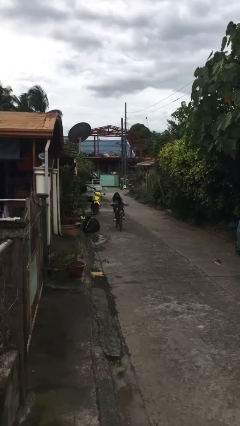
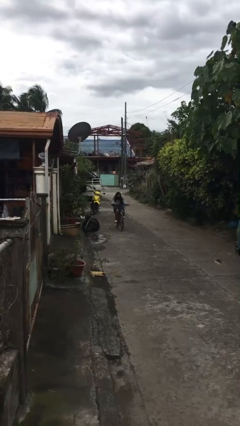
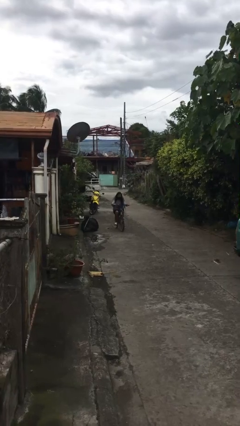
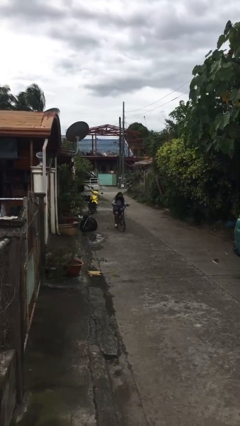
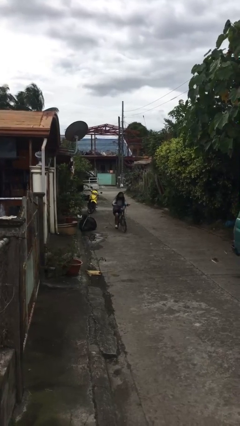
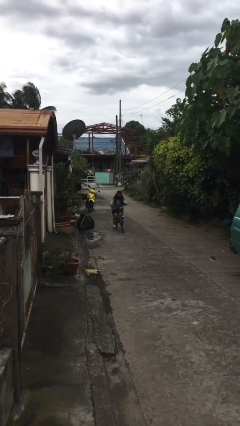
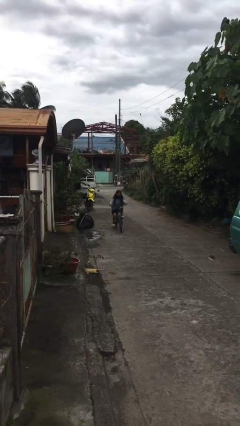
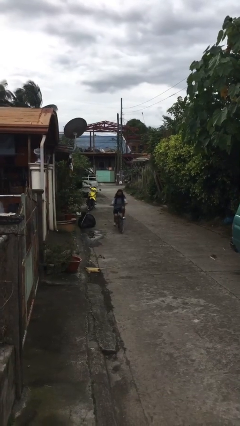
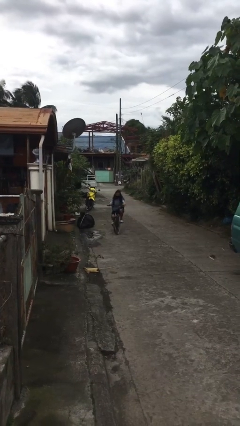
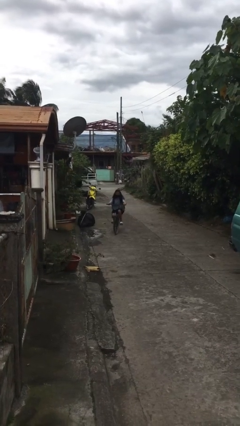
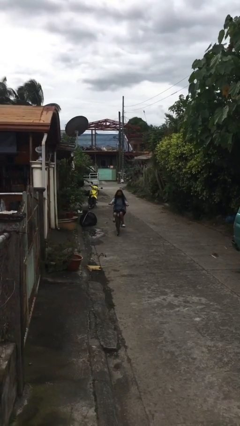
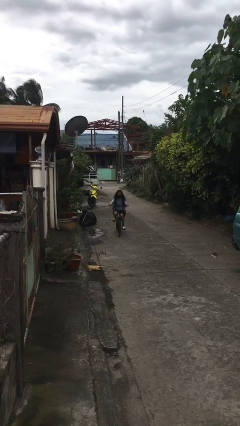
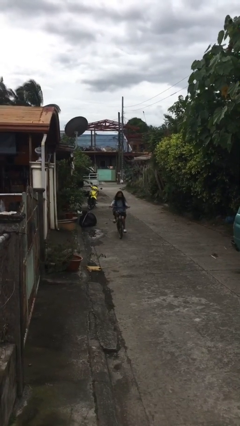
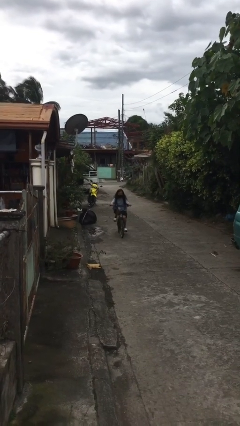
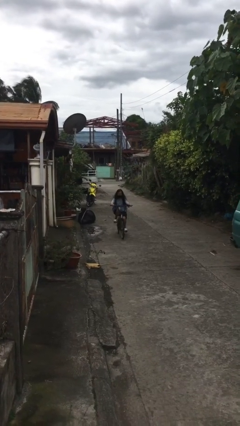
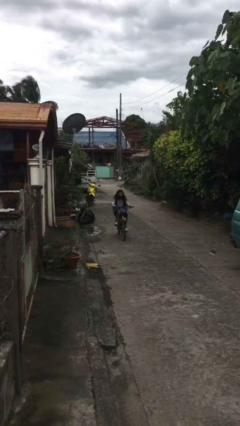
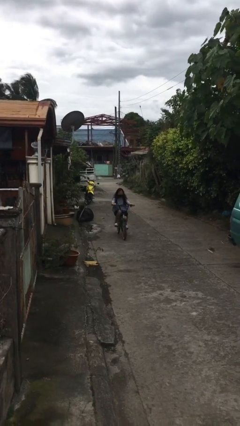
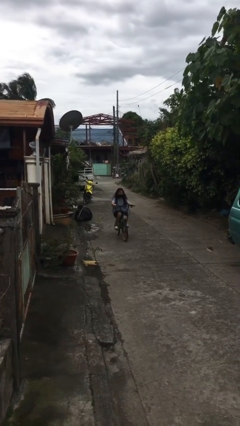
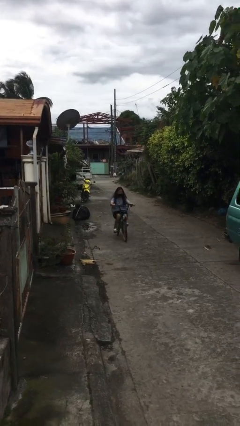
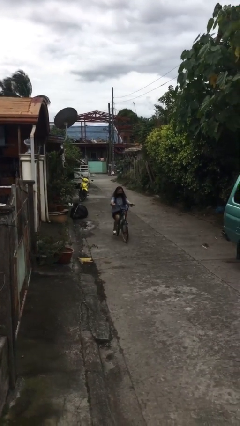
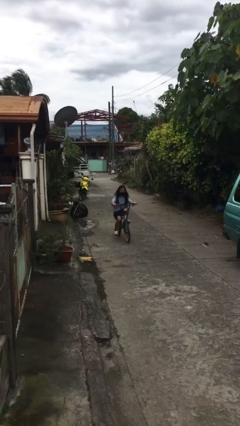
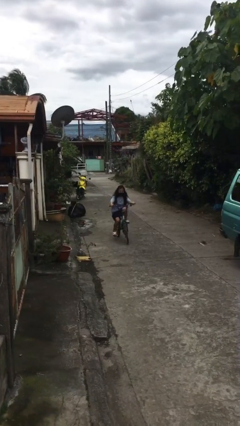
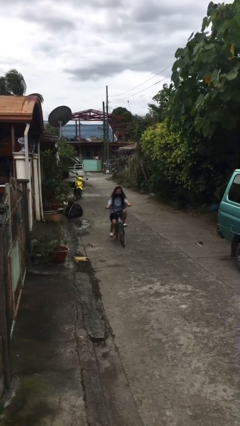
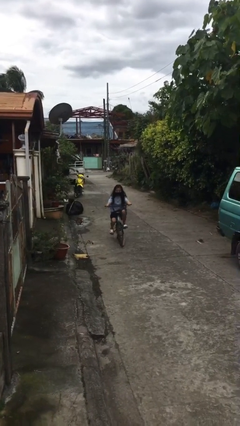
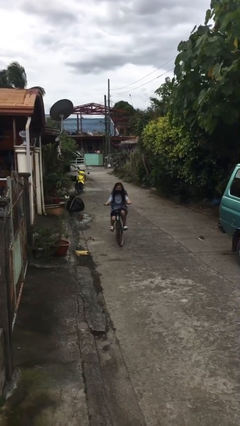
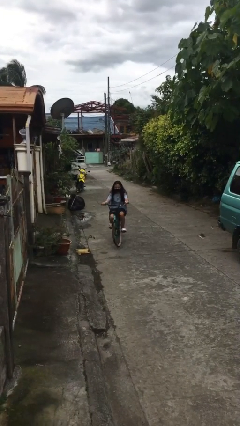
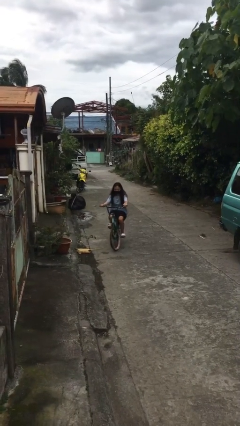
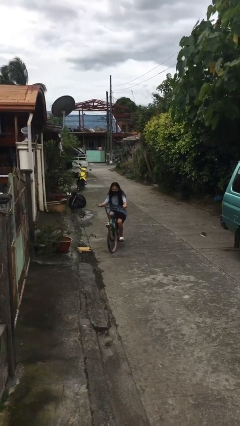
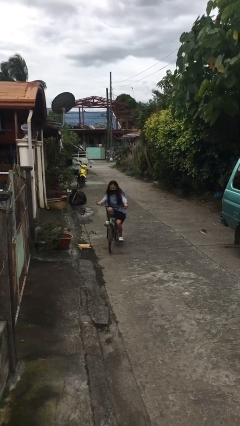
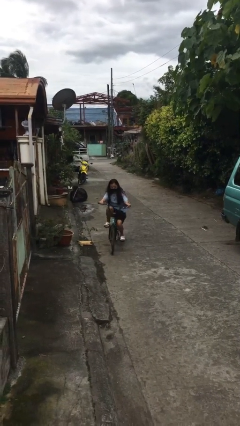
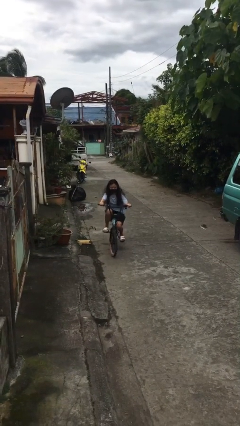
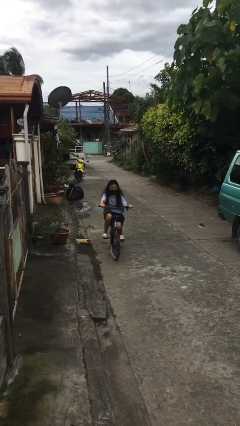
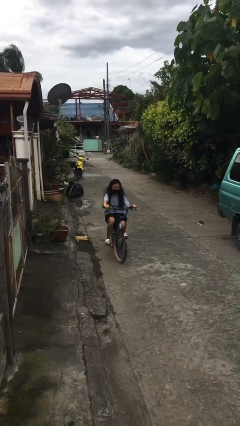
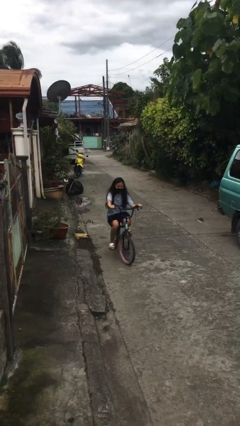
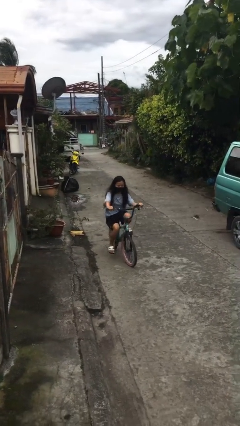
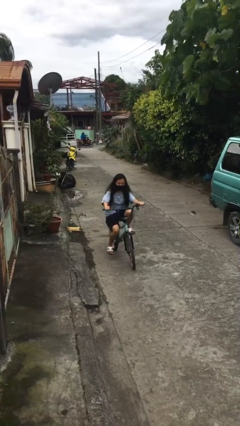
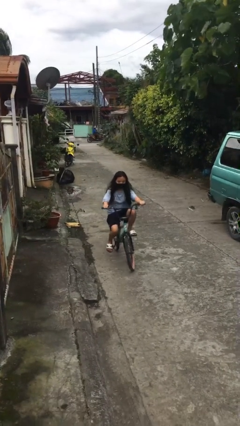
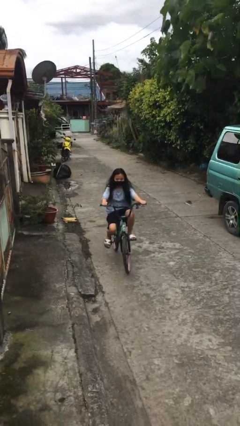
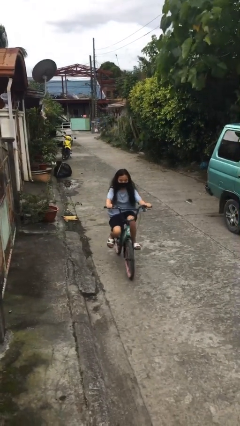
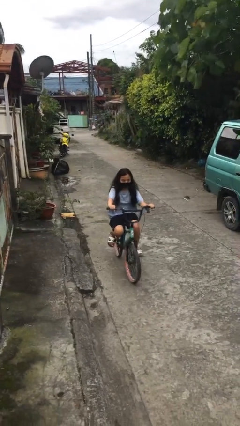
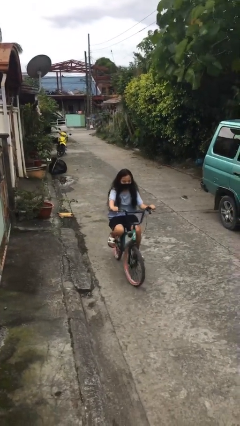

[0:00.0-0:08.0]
person rides bicycle

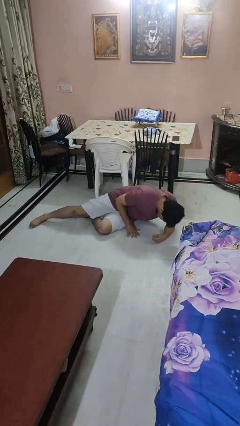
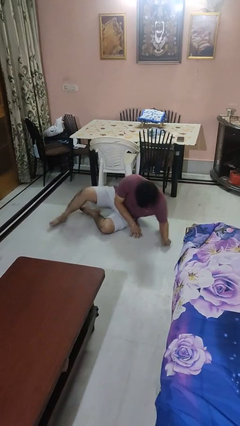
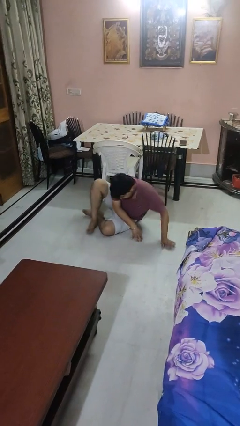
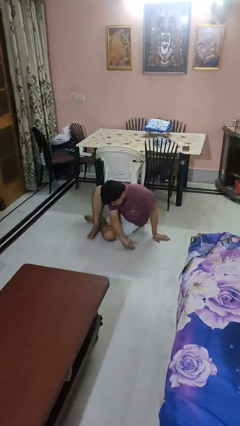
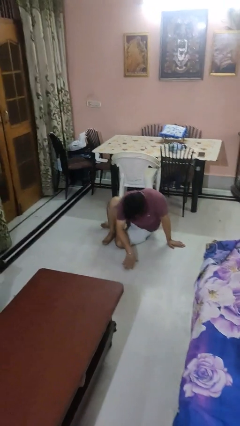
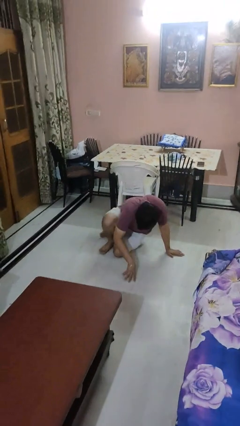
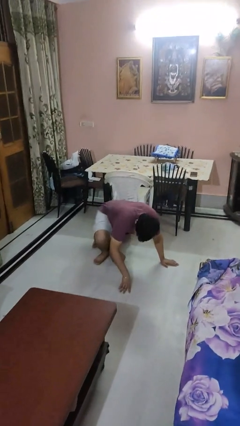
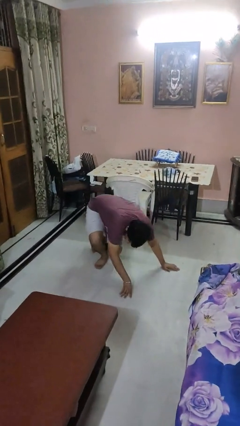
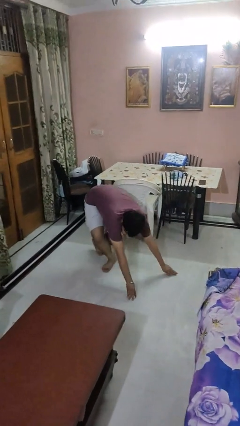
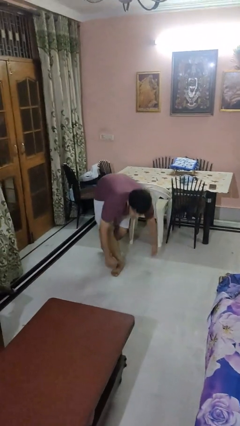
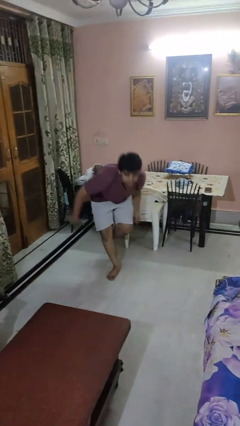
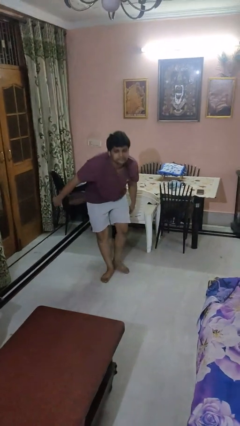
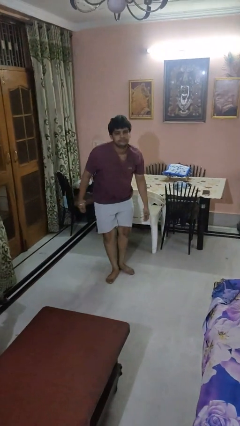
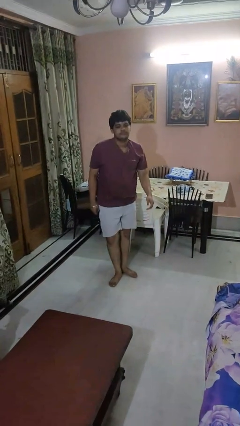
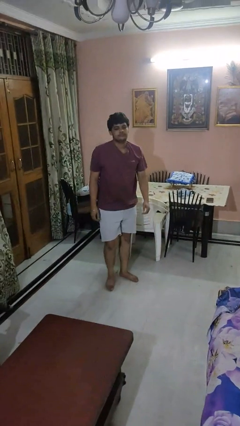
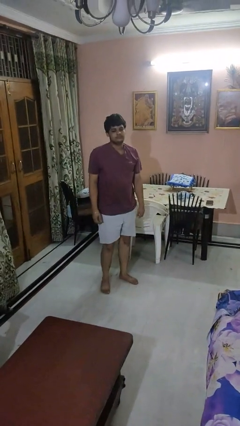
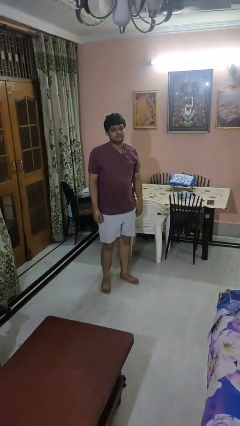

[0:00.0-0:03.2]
person stands up from floor

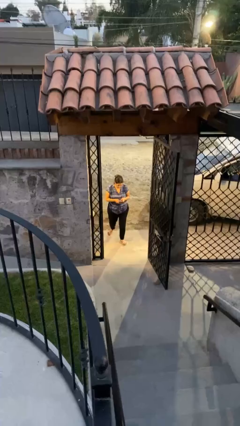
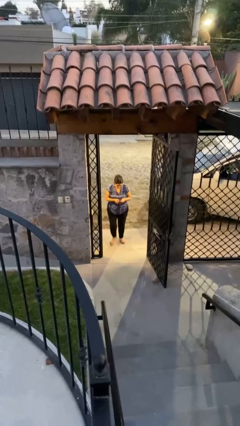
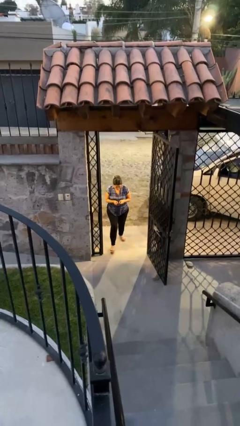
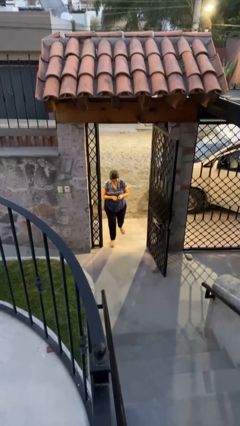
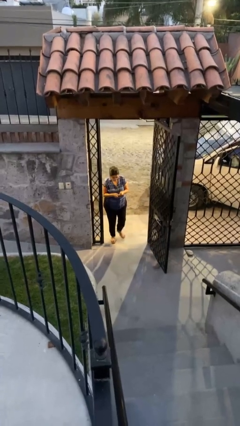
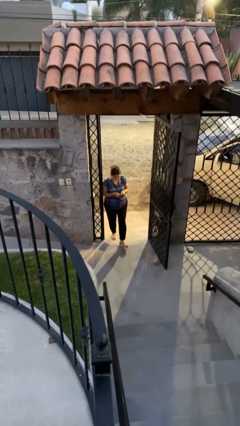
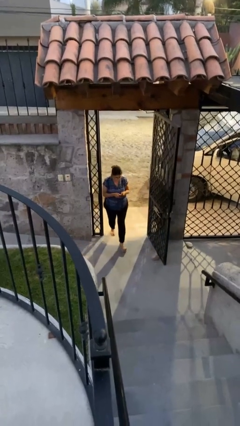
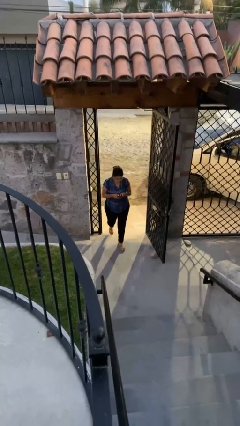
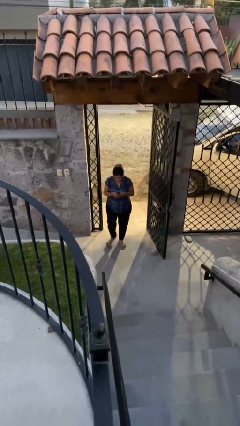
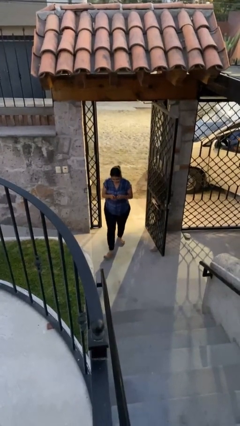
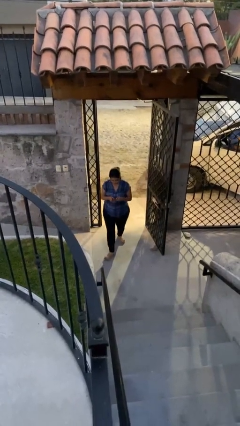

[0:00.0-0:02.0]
person enters scene through structure

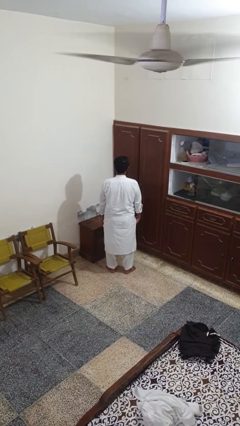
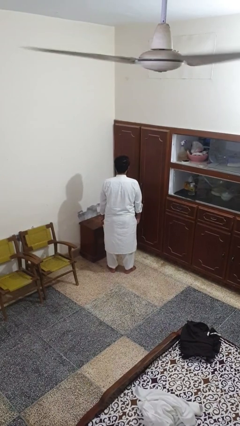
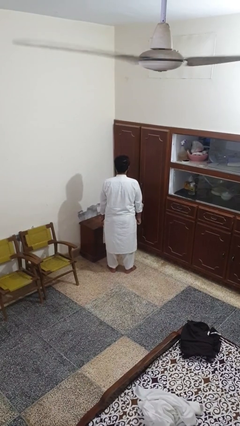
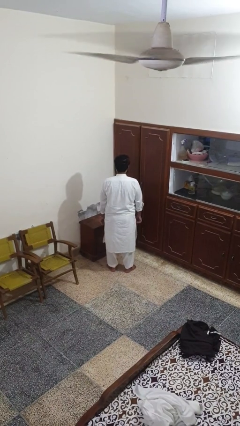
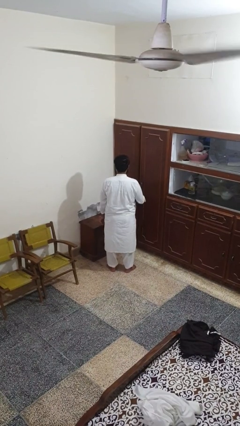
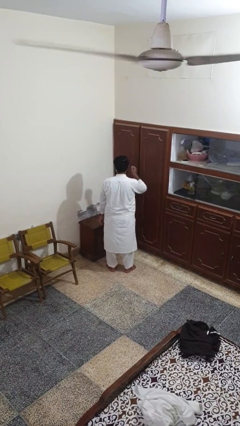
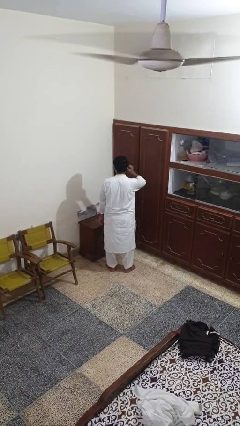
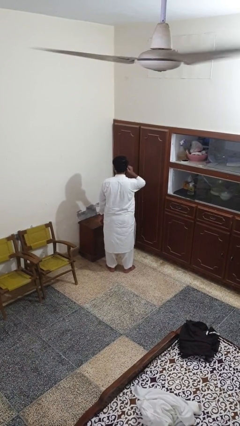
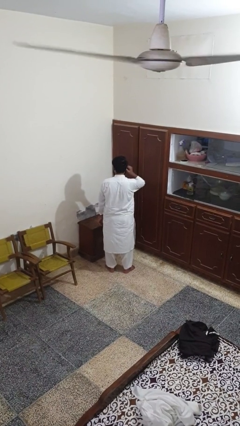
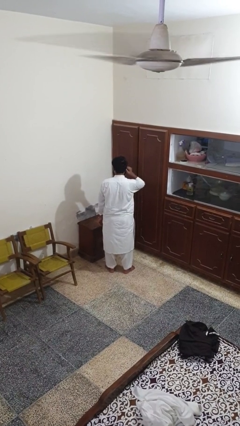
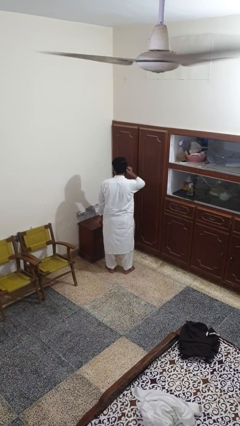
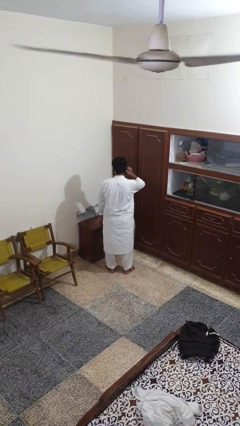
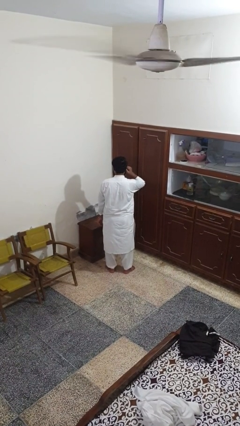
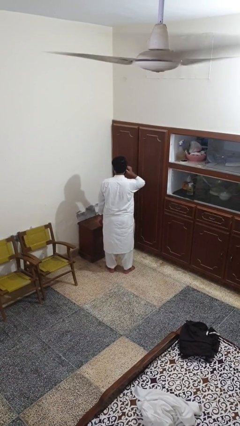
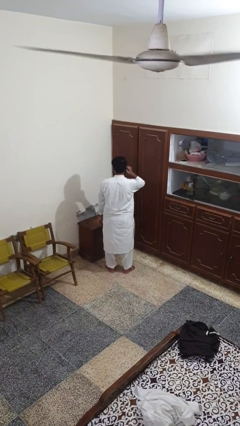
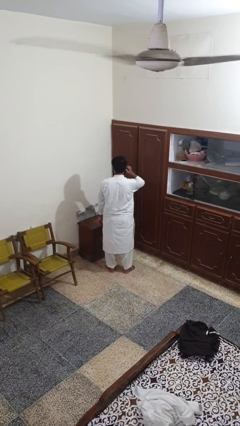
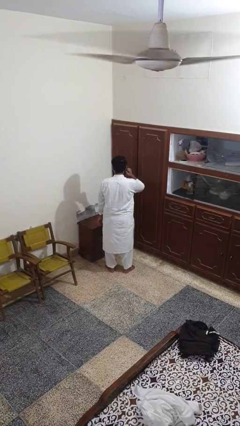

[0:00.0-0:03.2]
person touches earlobe

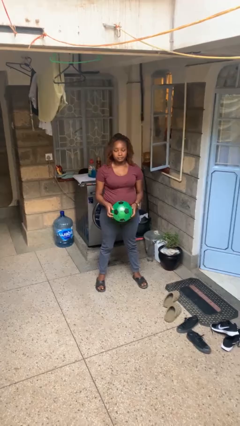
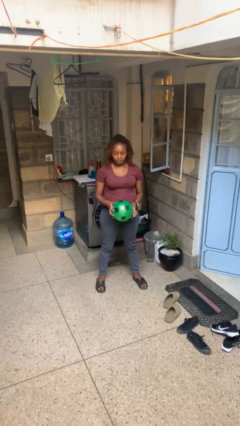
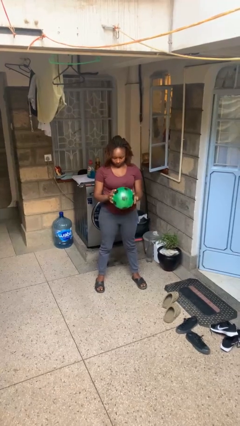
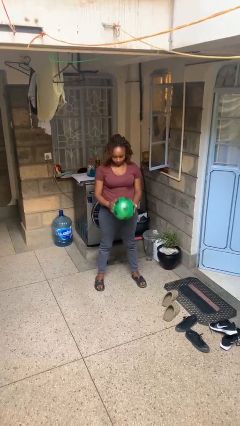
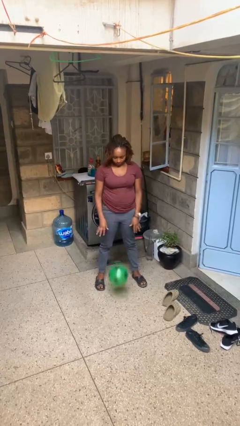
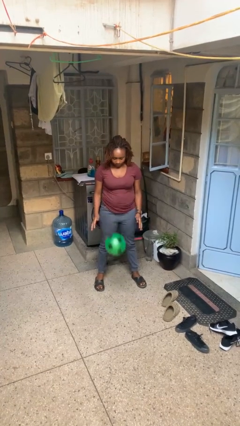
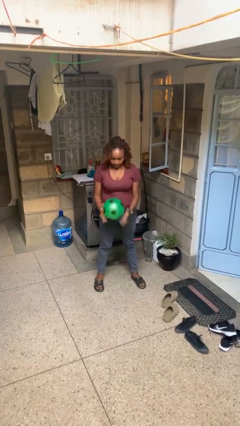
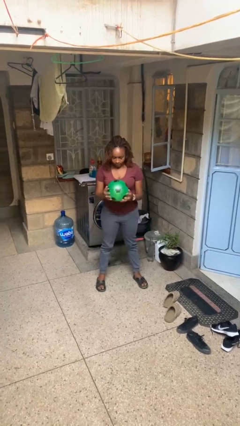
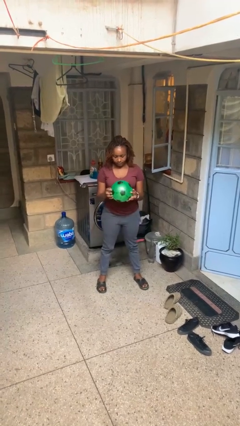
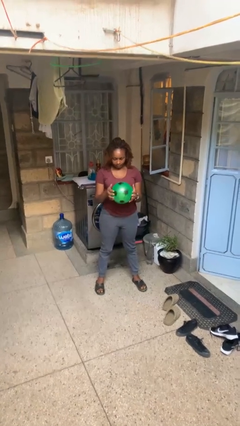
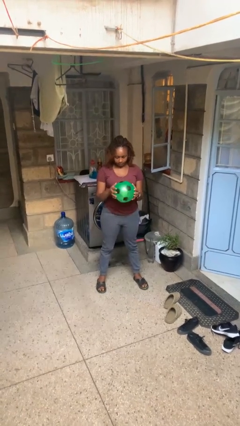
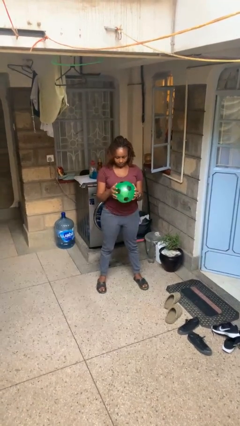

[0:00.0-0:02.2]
person bounces ball on floor
